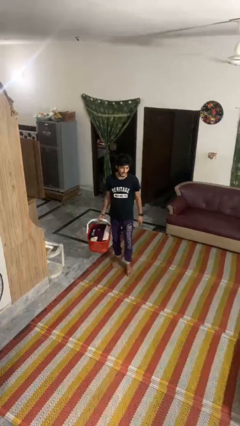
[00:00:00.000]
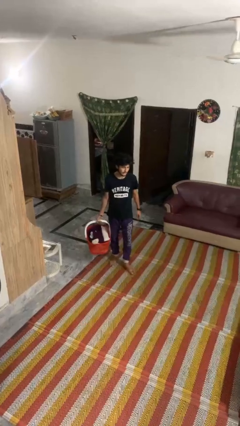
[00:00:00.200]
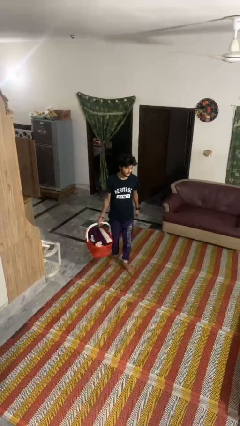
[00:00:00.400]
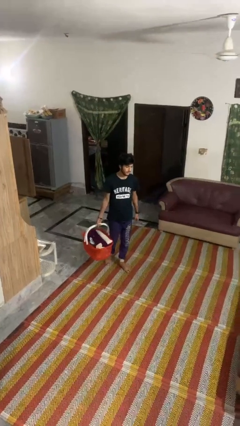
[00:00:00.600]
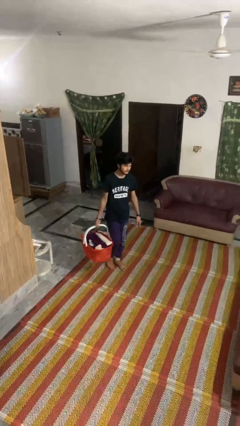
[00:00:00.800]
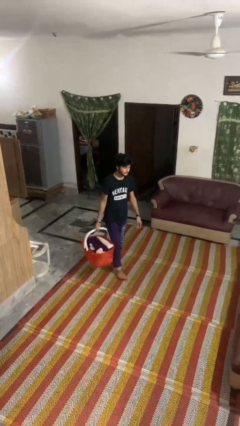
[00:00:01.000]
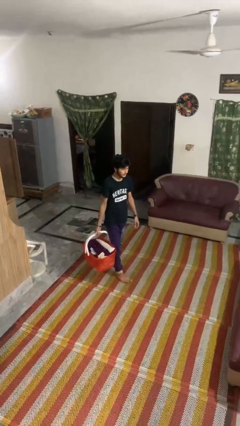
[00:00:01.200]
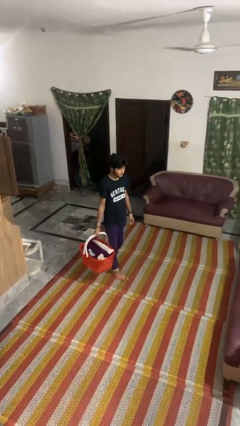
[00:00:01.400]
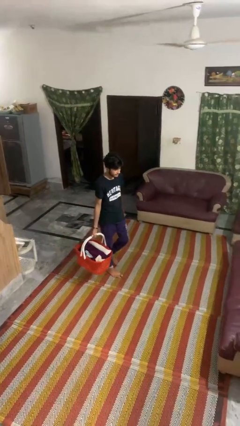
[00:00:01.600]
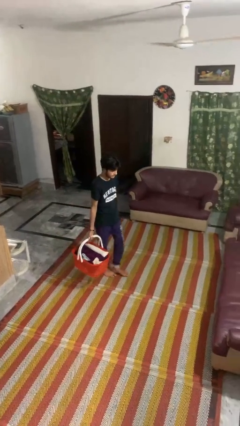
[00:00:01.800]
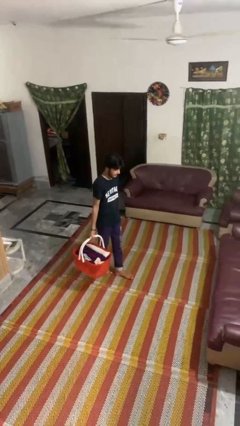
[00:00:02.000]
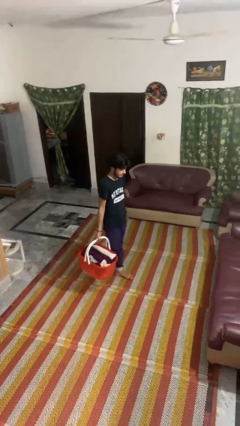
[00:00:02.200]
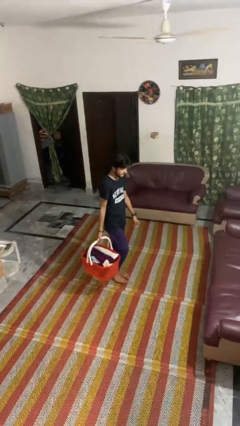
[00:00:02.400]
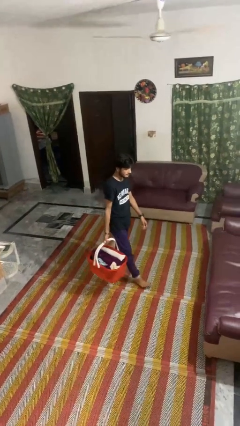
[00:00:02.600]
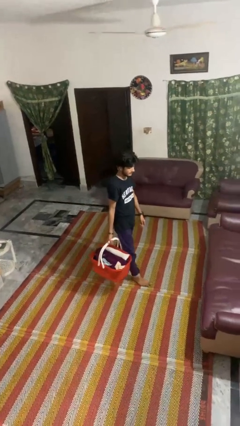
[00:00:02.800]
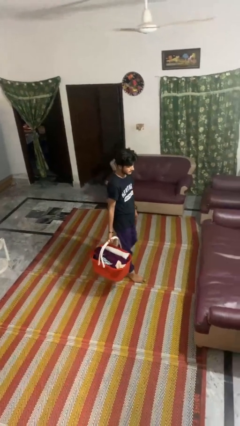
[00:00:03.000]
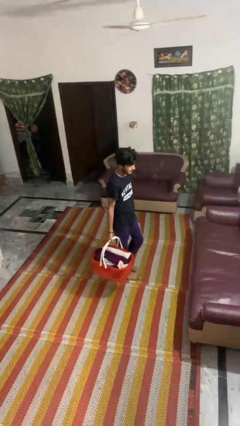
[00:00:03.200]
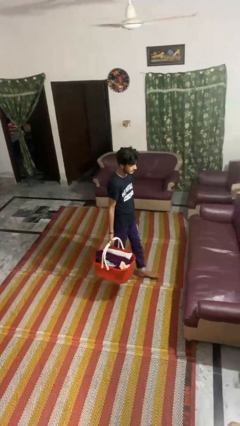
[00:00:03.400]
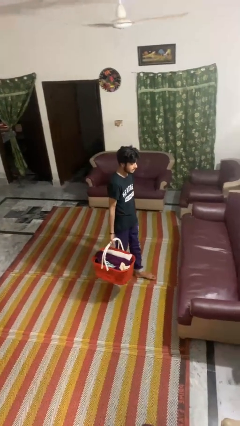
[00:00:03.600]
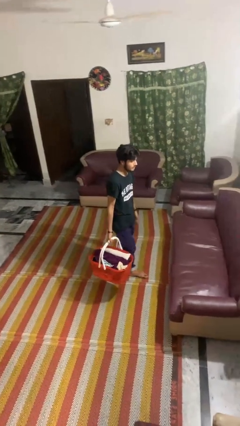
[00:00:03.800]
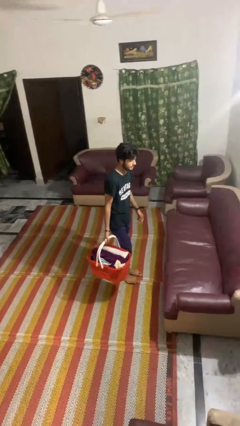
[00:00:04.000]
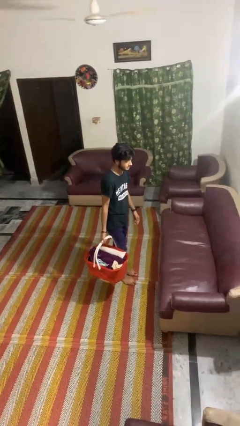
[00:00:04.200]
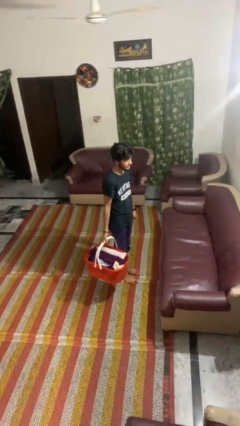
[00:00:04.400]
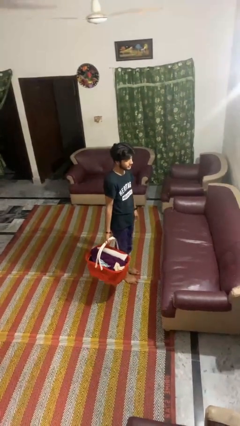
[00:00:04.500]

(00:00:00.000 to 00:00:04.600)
person carries laundry basket

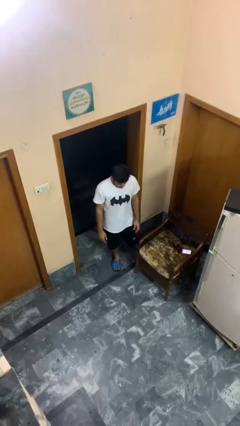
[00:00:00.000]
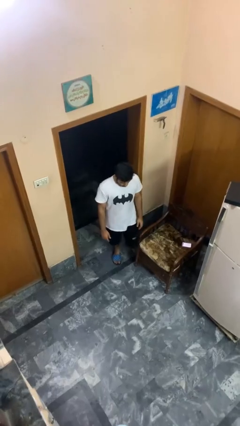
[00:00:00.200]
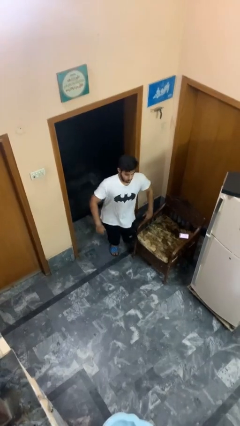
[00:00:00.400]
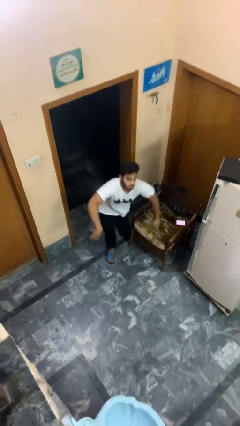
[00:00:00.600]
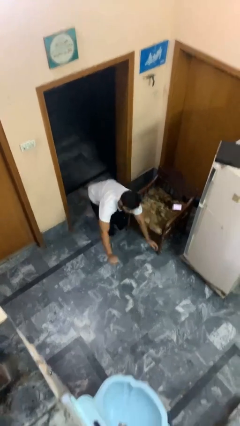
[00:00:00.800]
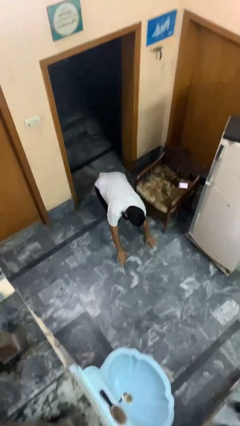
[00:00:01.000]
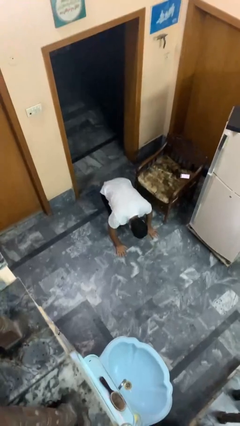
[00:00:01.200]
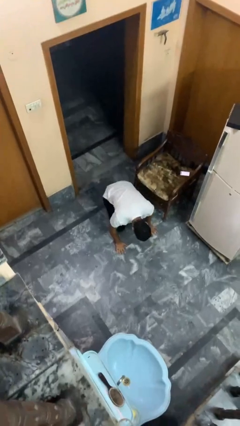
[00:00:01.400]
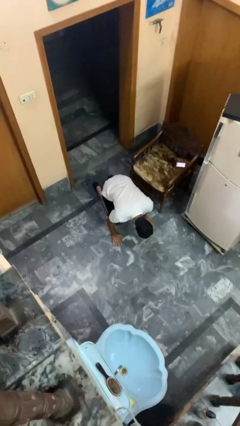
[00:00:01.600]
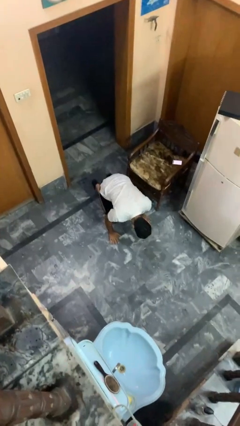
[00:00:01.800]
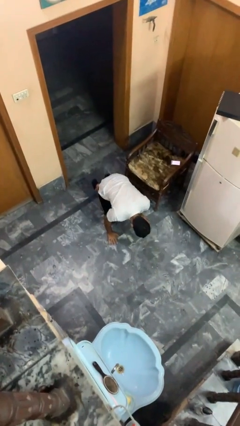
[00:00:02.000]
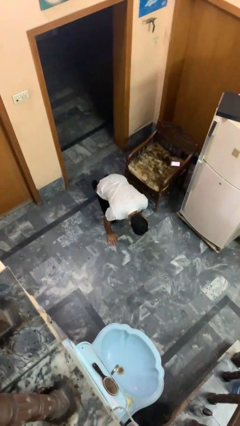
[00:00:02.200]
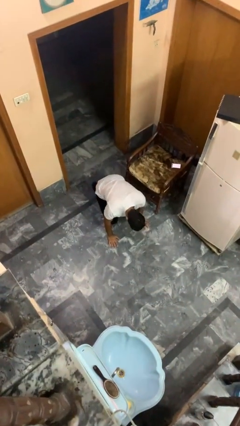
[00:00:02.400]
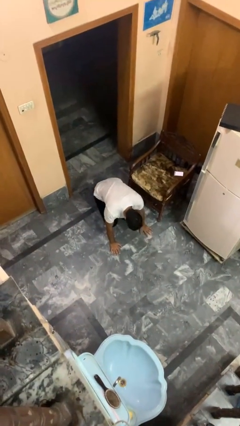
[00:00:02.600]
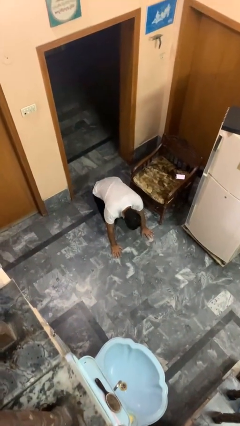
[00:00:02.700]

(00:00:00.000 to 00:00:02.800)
person trips on object on floor

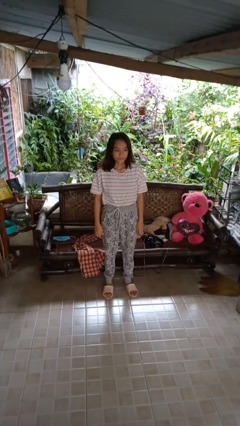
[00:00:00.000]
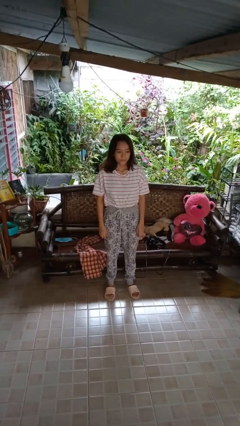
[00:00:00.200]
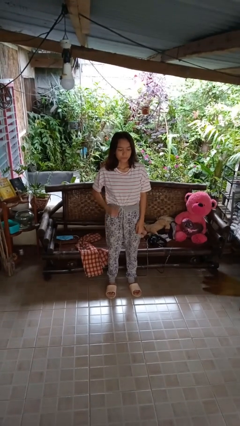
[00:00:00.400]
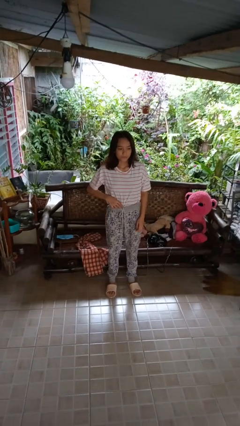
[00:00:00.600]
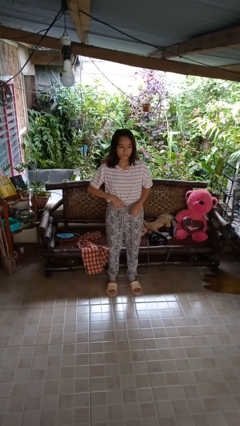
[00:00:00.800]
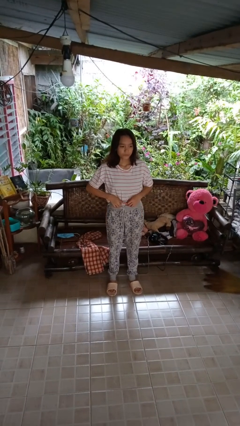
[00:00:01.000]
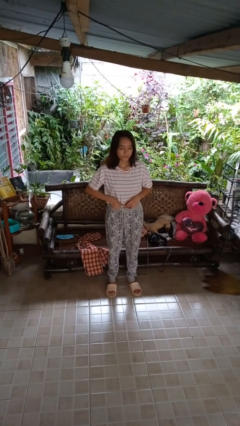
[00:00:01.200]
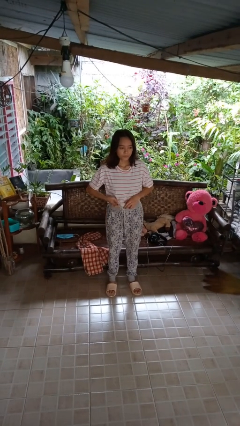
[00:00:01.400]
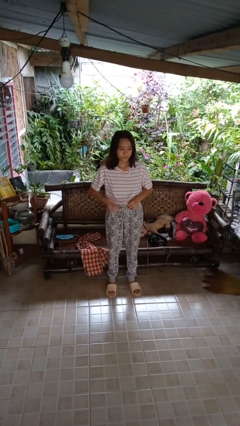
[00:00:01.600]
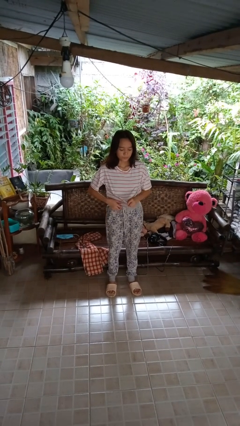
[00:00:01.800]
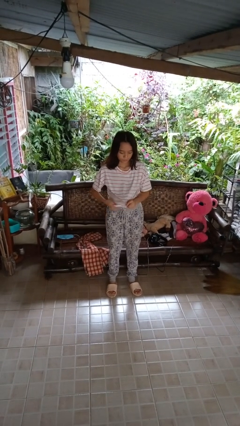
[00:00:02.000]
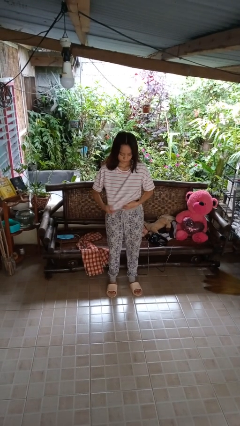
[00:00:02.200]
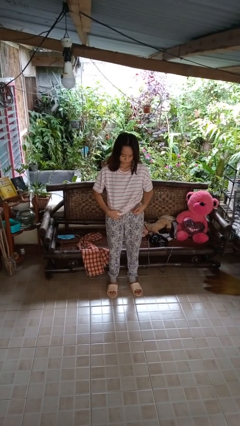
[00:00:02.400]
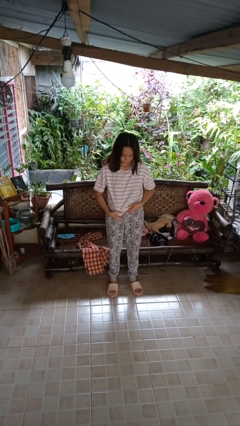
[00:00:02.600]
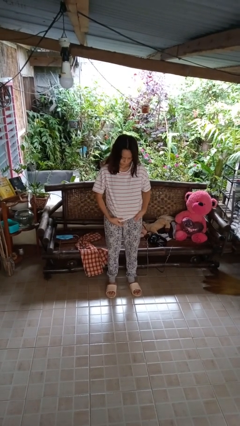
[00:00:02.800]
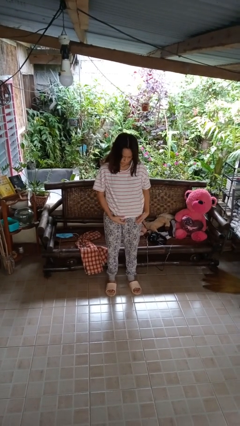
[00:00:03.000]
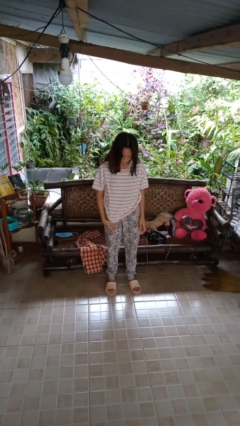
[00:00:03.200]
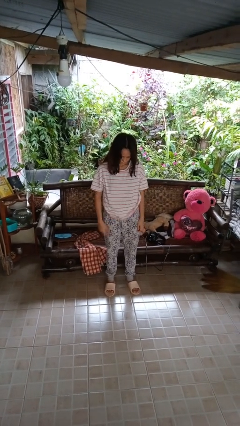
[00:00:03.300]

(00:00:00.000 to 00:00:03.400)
person untucks shirt

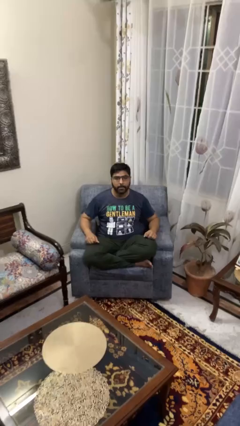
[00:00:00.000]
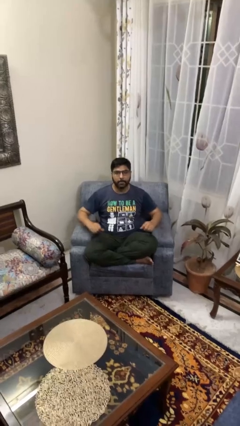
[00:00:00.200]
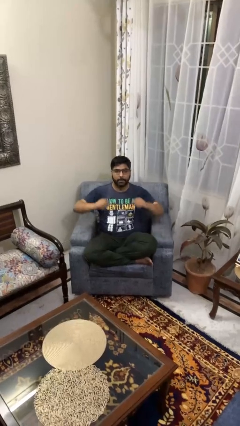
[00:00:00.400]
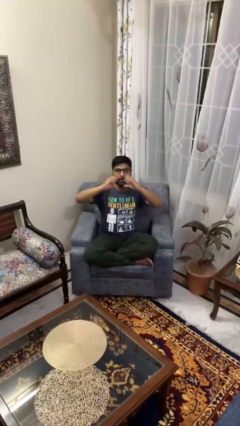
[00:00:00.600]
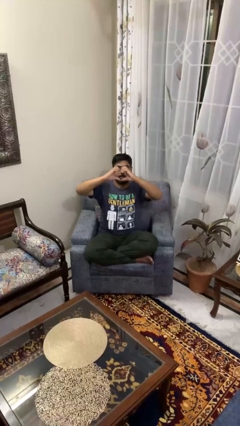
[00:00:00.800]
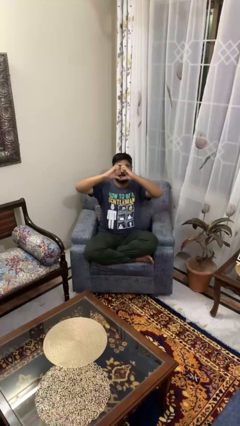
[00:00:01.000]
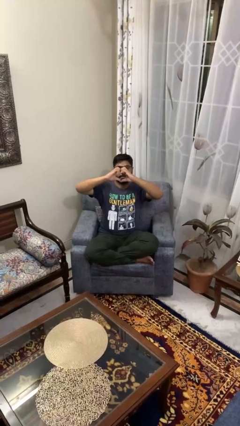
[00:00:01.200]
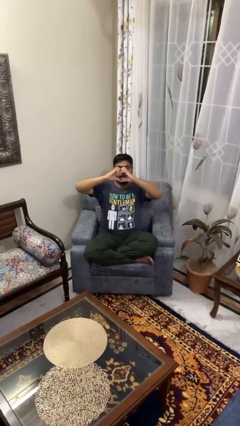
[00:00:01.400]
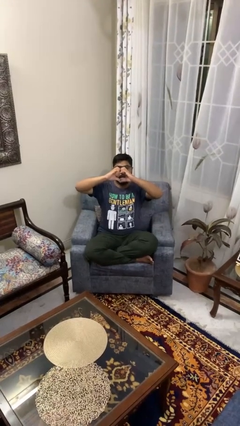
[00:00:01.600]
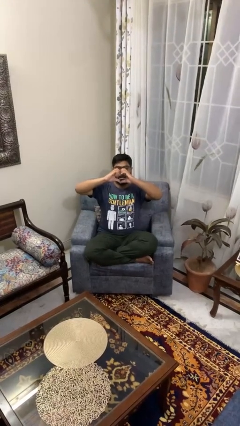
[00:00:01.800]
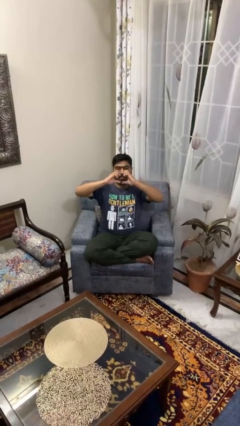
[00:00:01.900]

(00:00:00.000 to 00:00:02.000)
person gestures heart

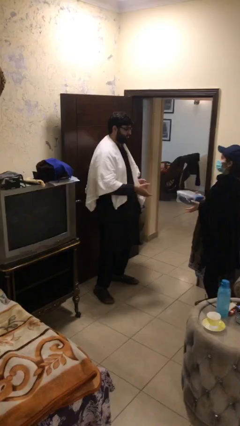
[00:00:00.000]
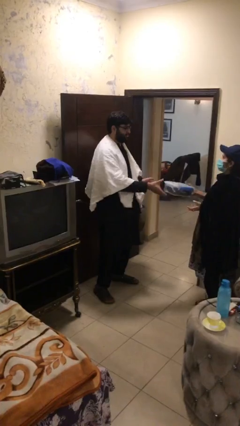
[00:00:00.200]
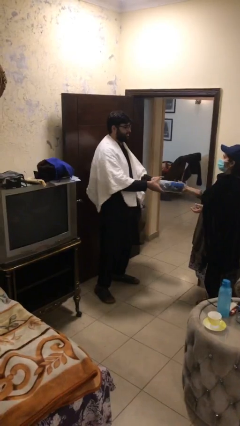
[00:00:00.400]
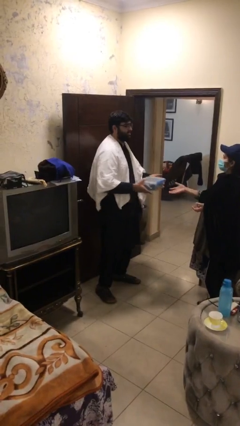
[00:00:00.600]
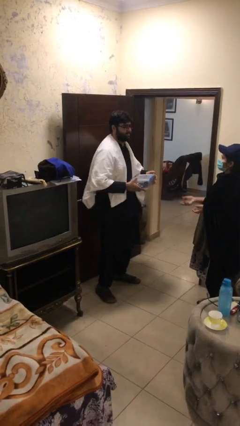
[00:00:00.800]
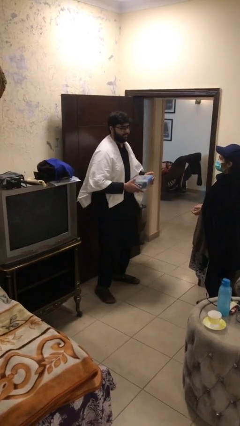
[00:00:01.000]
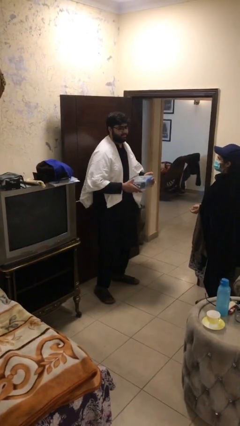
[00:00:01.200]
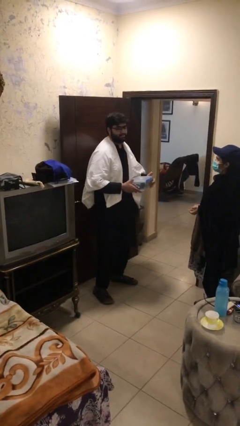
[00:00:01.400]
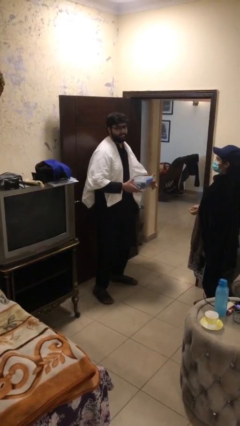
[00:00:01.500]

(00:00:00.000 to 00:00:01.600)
person transfers object to person

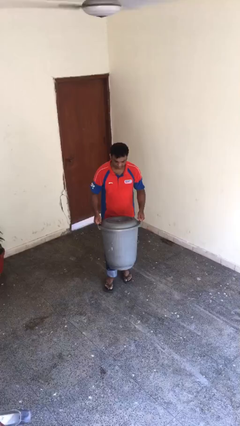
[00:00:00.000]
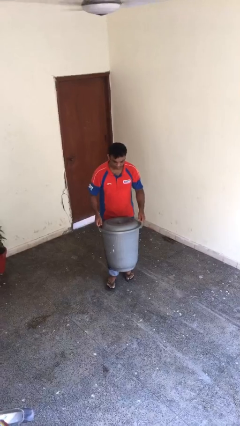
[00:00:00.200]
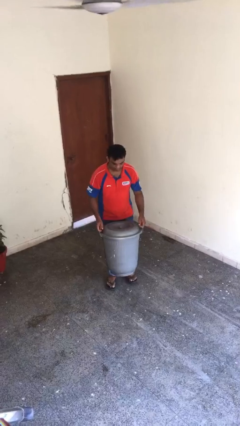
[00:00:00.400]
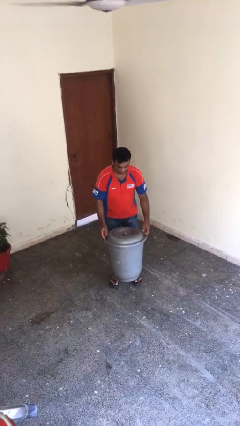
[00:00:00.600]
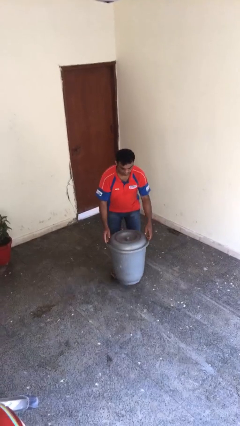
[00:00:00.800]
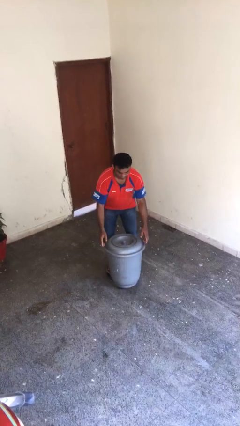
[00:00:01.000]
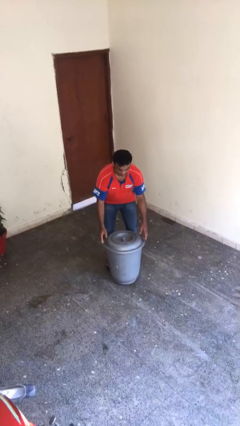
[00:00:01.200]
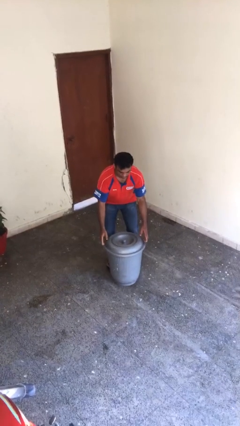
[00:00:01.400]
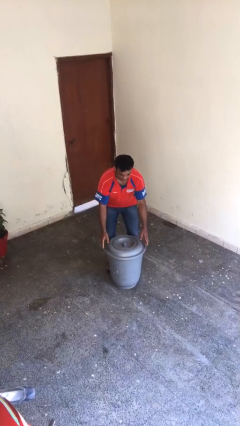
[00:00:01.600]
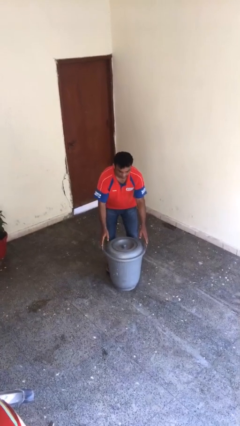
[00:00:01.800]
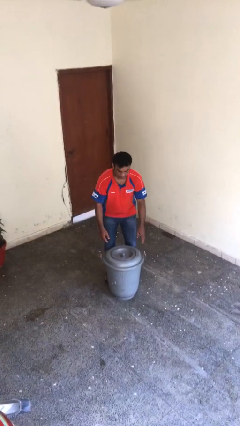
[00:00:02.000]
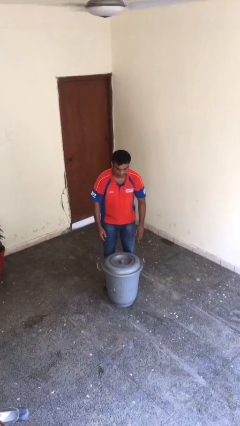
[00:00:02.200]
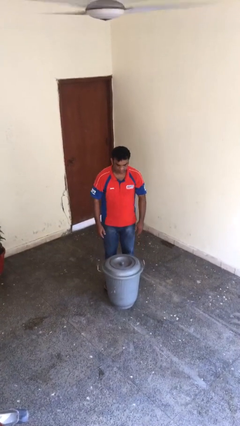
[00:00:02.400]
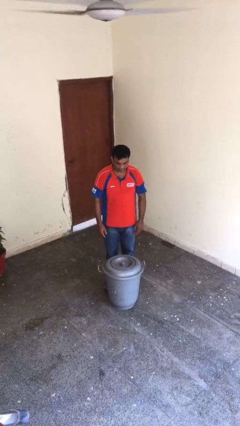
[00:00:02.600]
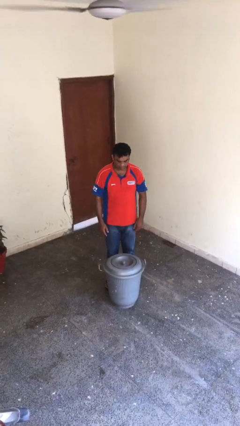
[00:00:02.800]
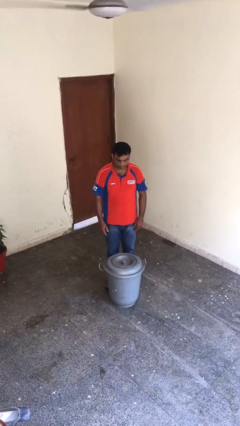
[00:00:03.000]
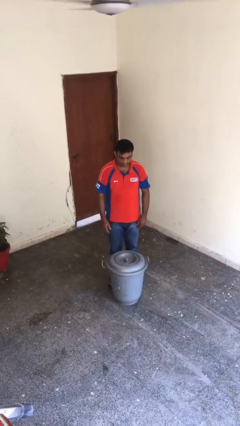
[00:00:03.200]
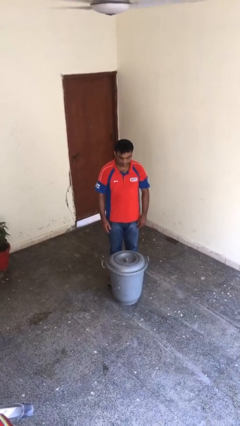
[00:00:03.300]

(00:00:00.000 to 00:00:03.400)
person puts down object on floor
